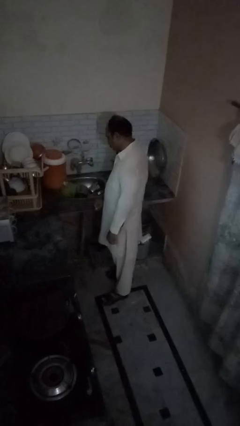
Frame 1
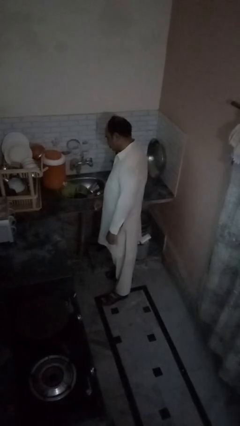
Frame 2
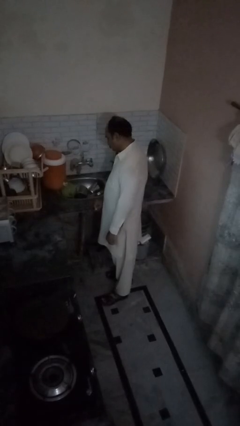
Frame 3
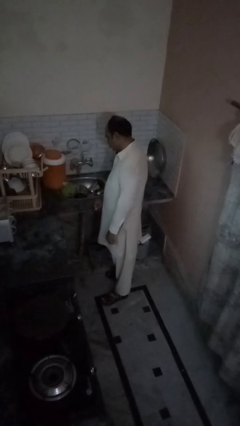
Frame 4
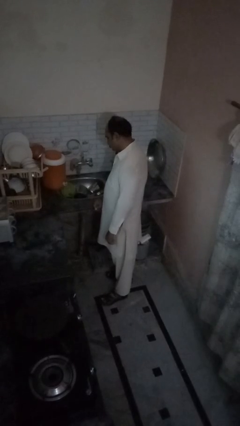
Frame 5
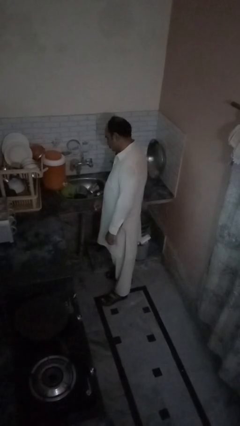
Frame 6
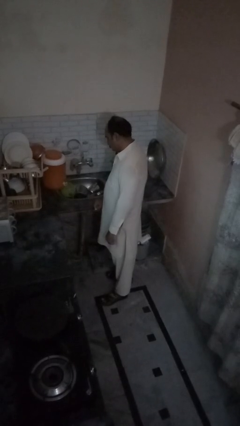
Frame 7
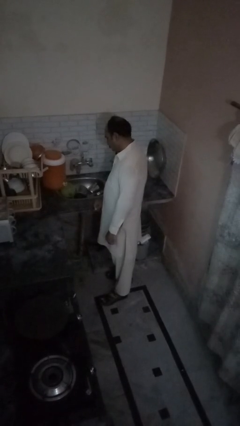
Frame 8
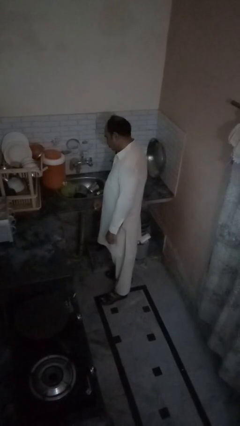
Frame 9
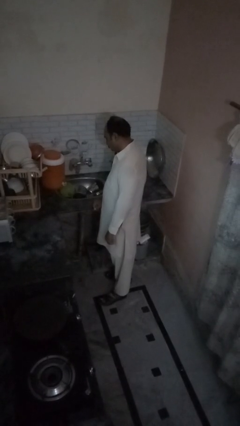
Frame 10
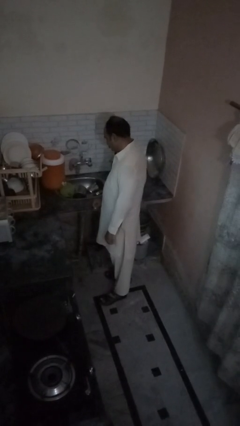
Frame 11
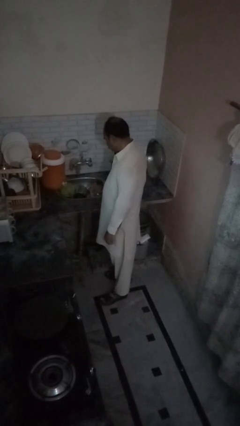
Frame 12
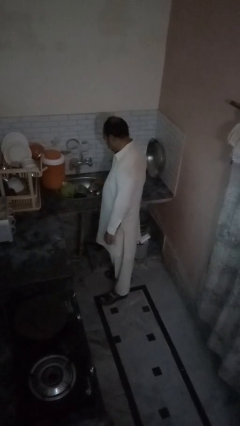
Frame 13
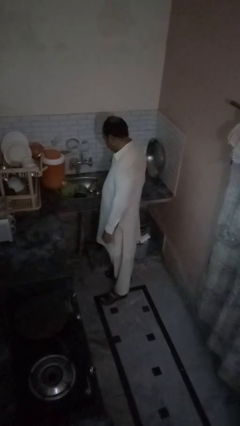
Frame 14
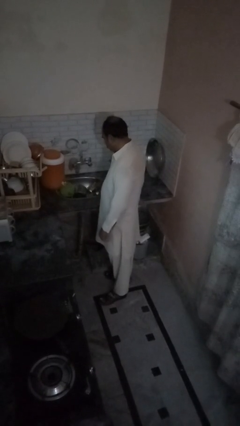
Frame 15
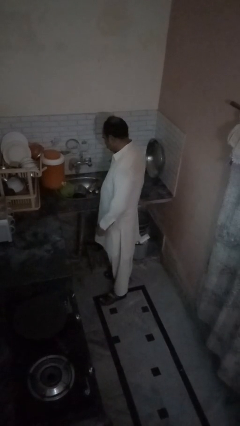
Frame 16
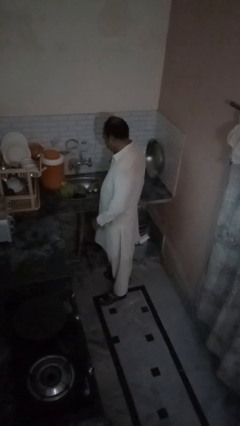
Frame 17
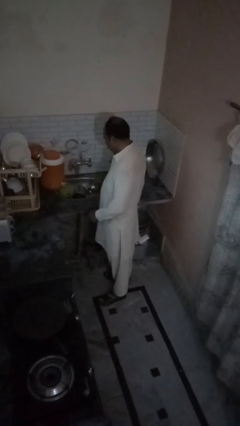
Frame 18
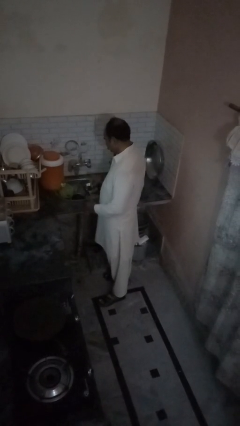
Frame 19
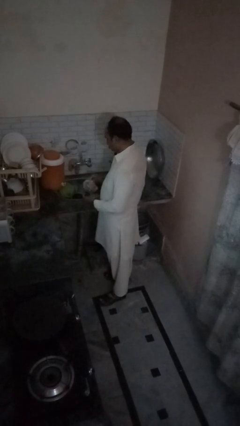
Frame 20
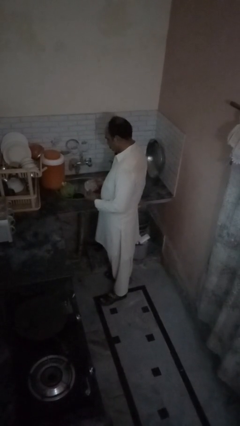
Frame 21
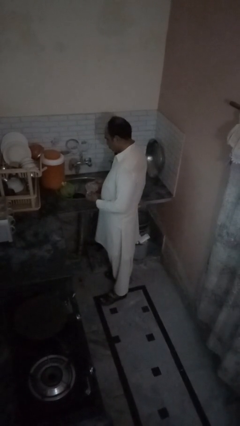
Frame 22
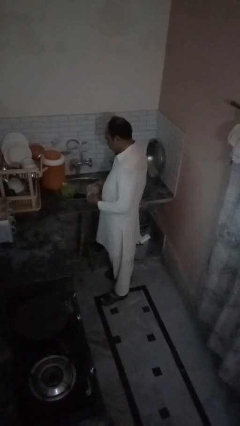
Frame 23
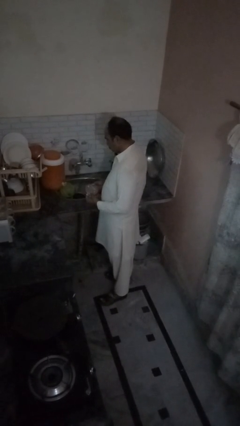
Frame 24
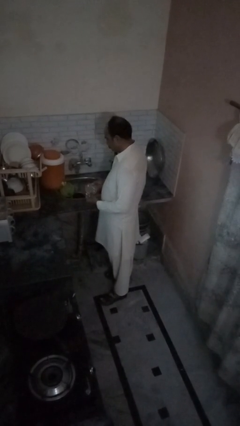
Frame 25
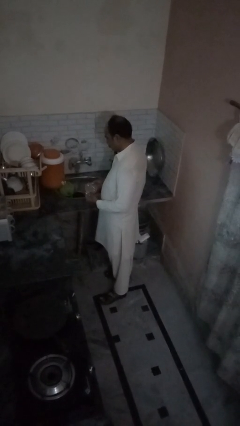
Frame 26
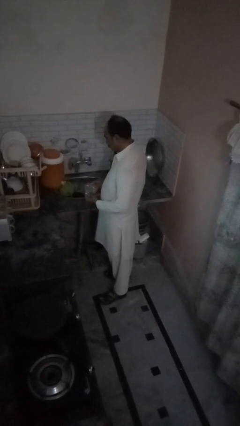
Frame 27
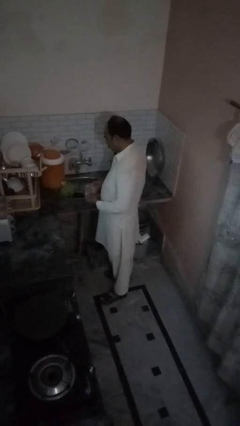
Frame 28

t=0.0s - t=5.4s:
person picks up object from countertop

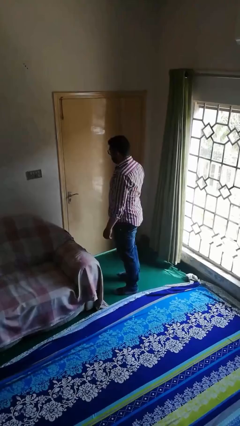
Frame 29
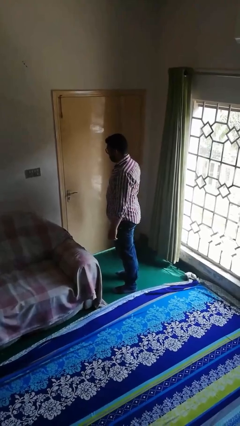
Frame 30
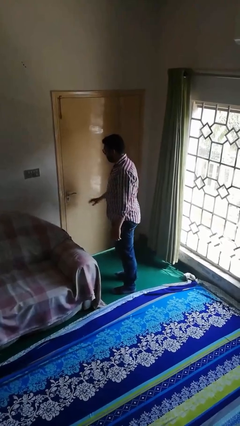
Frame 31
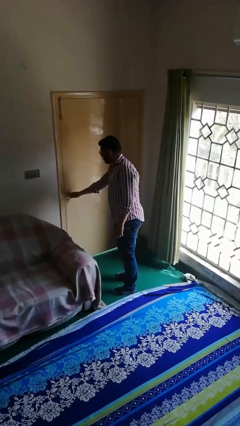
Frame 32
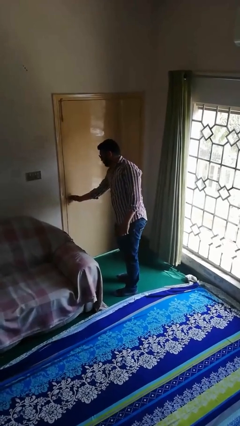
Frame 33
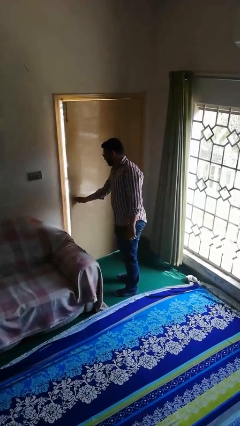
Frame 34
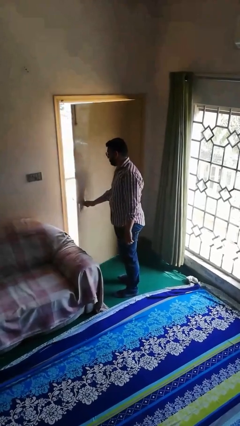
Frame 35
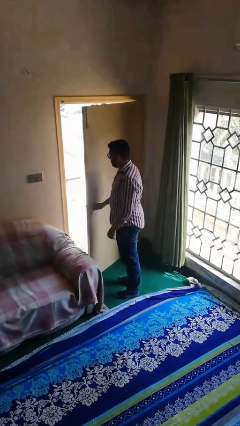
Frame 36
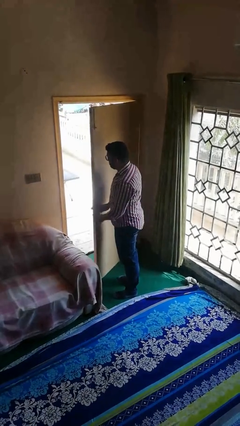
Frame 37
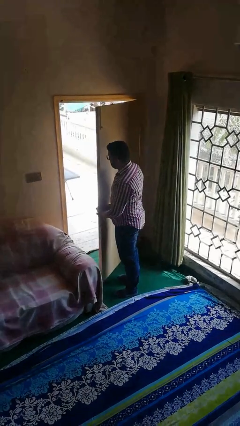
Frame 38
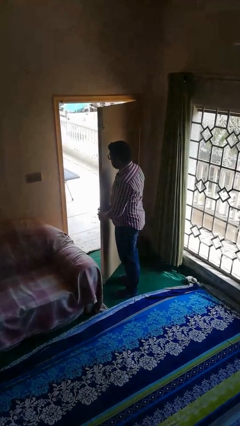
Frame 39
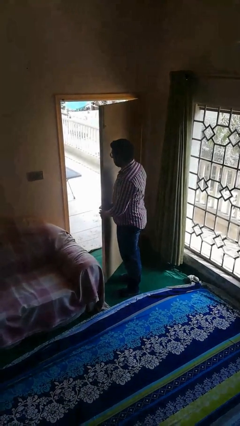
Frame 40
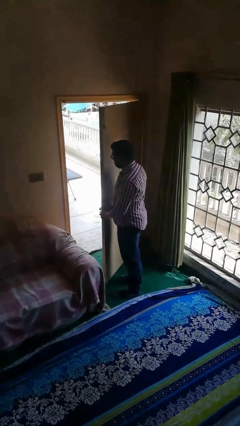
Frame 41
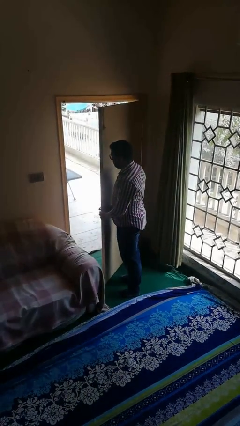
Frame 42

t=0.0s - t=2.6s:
person opens facility door

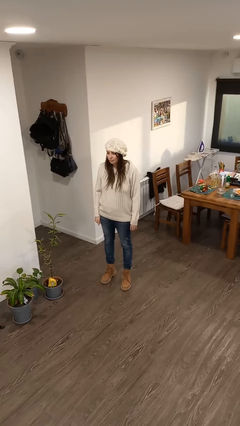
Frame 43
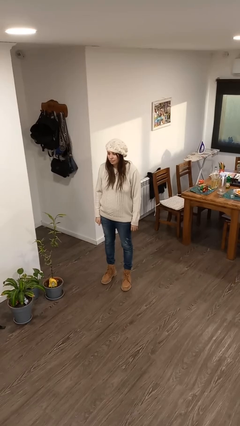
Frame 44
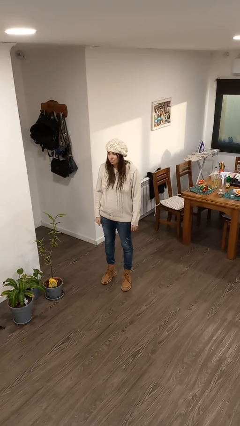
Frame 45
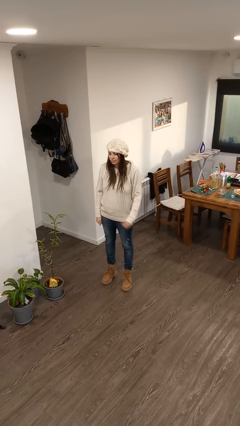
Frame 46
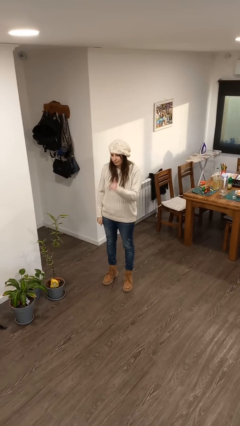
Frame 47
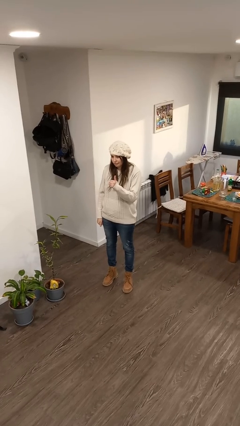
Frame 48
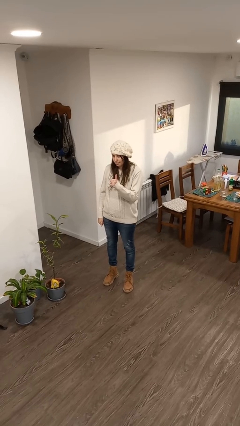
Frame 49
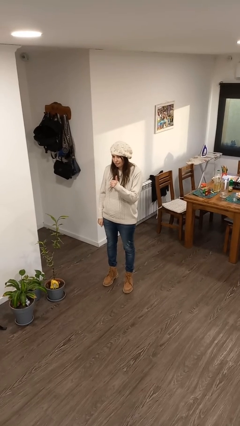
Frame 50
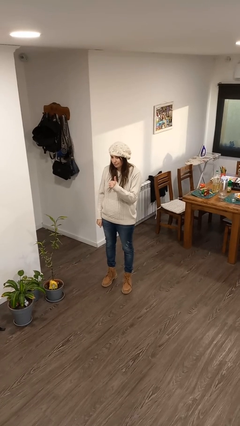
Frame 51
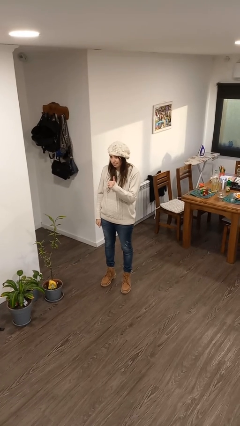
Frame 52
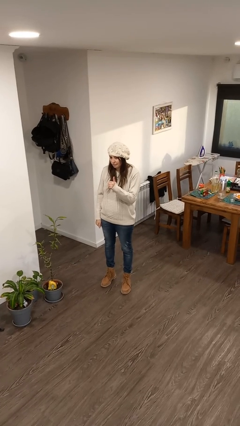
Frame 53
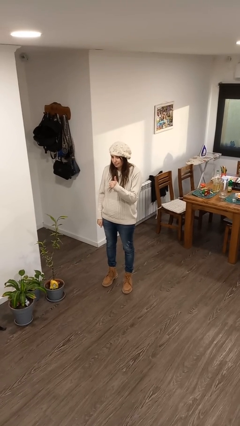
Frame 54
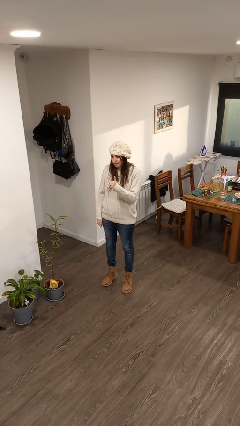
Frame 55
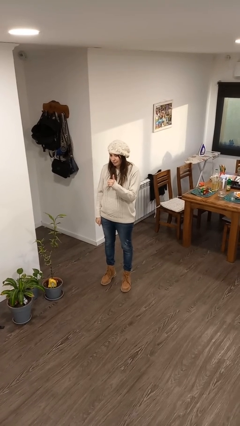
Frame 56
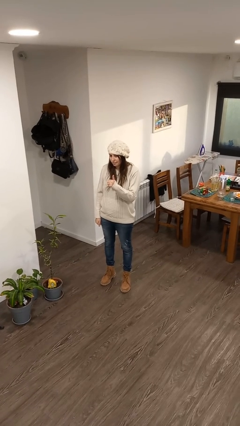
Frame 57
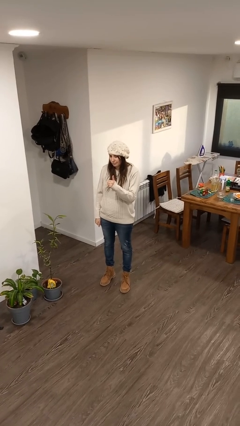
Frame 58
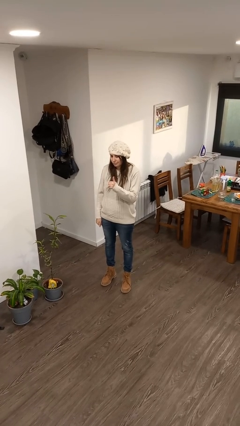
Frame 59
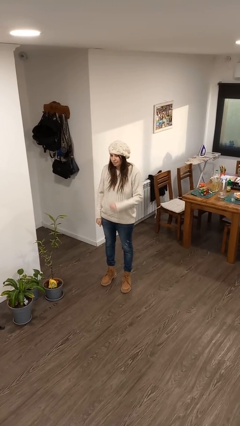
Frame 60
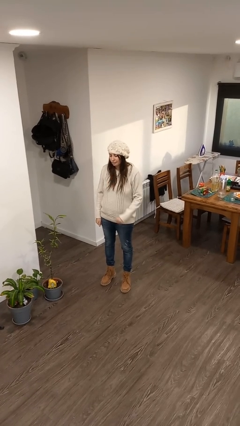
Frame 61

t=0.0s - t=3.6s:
person gestures thumbs up

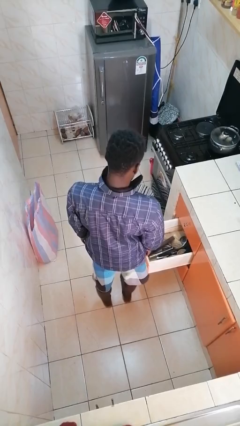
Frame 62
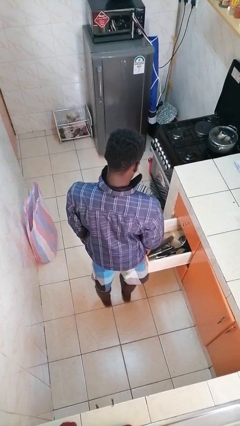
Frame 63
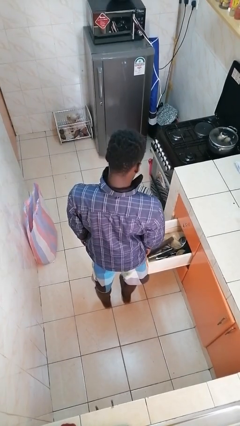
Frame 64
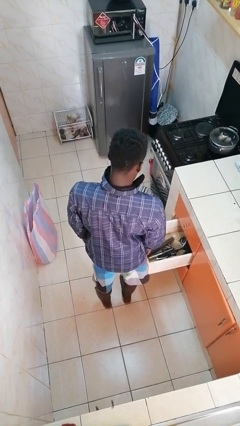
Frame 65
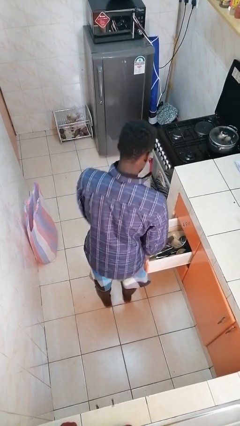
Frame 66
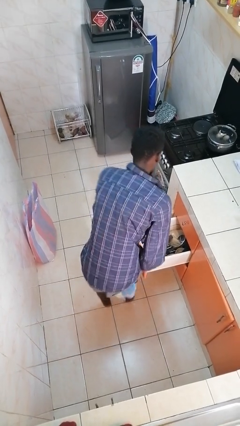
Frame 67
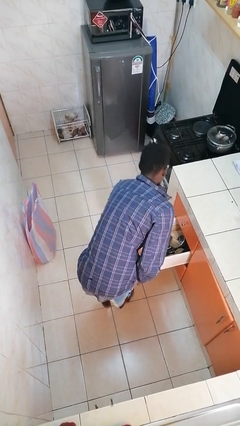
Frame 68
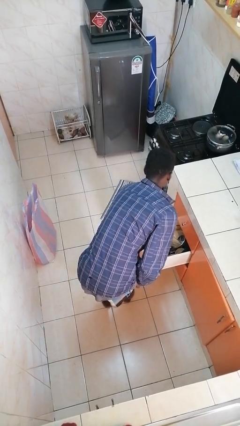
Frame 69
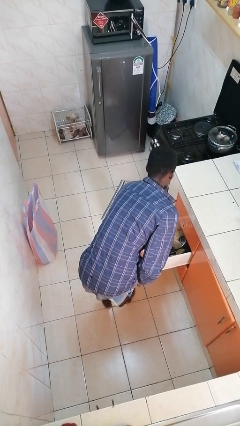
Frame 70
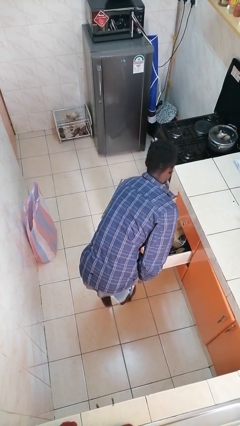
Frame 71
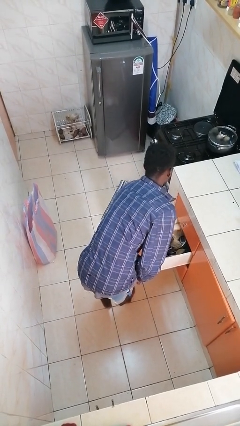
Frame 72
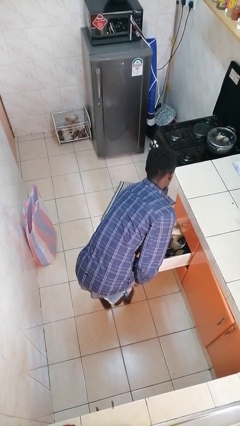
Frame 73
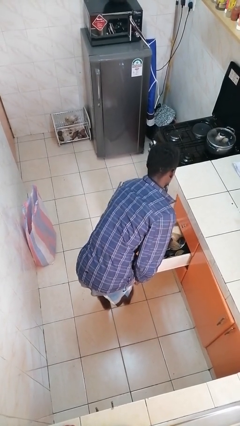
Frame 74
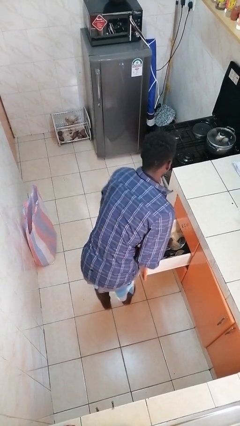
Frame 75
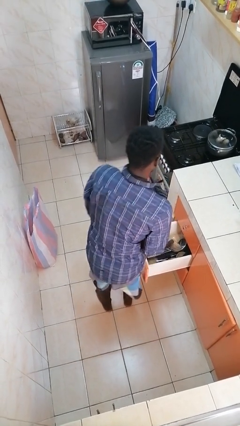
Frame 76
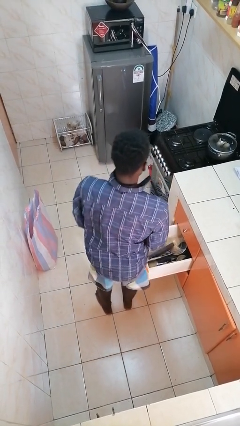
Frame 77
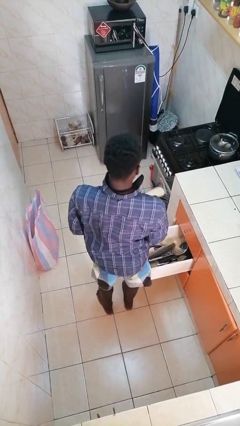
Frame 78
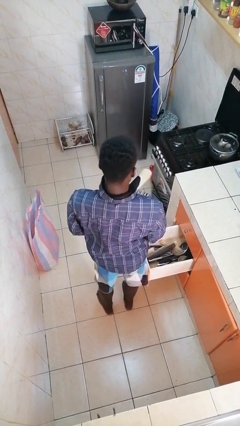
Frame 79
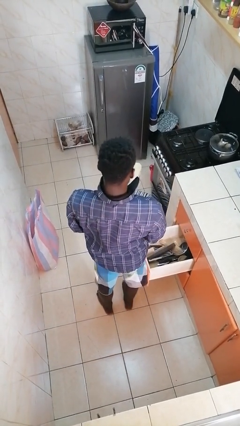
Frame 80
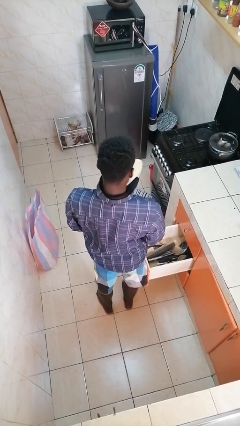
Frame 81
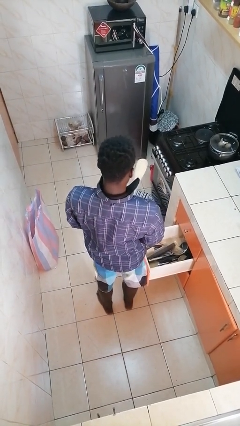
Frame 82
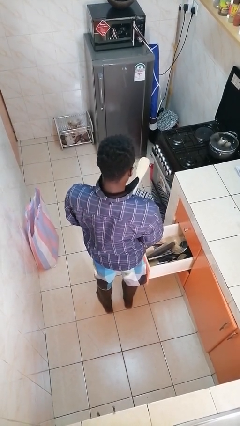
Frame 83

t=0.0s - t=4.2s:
person takes object from kitchen drawer

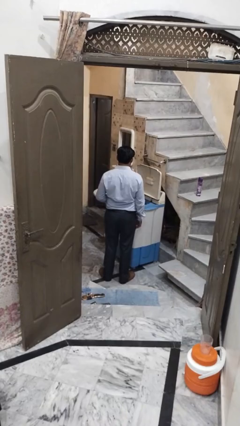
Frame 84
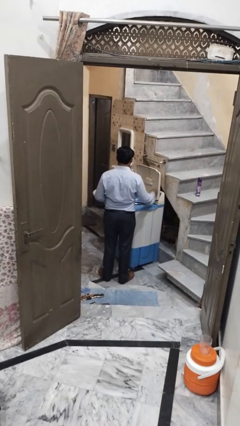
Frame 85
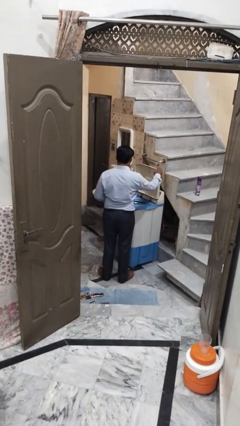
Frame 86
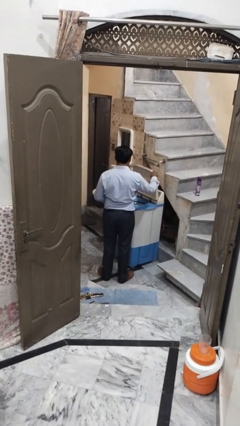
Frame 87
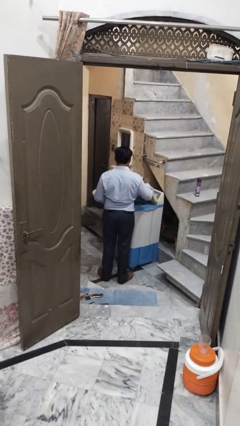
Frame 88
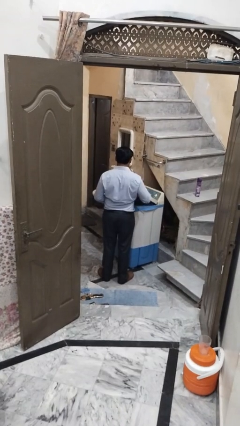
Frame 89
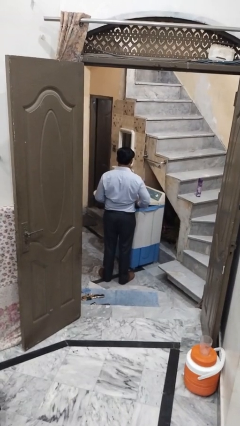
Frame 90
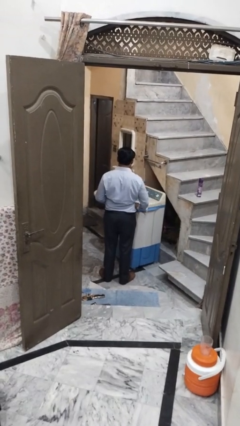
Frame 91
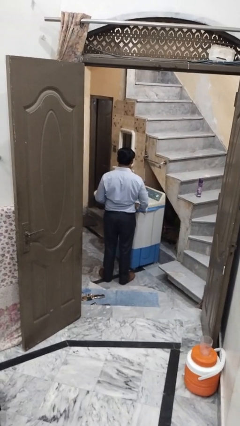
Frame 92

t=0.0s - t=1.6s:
person closes clothes washer
